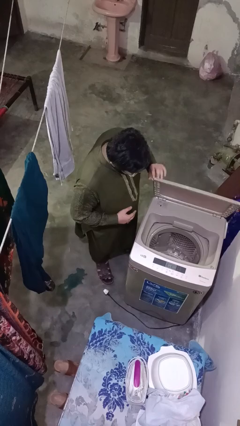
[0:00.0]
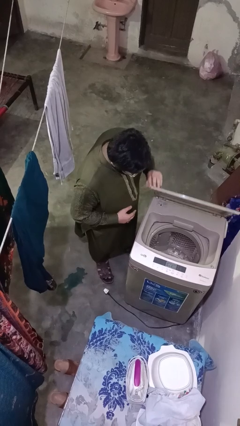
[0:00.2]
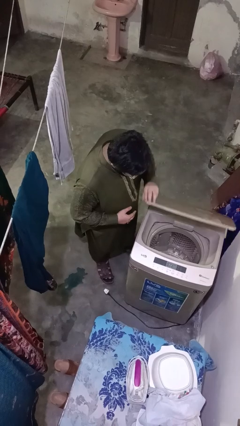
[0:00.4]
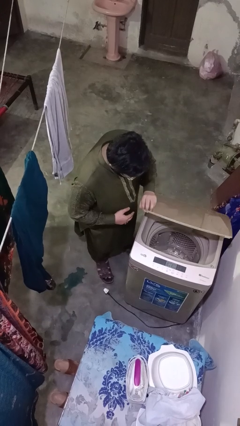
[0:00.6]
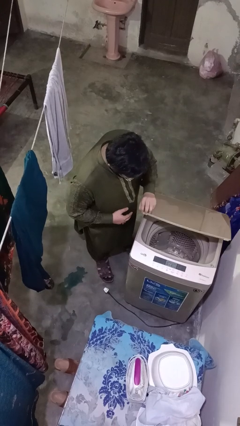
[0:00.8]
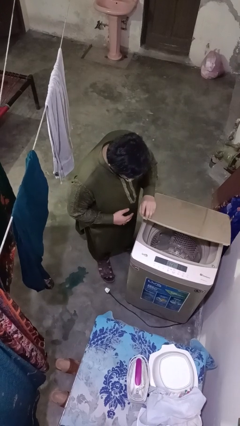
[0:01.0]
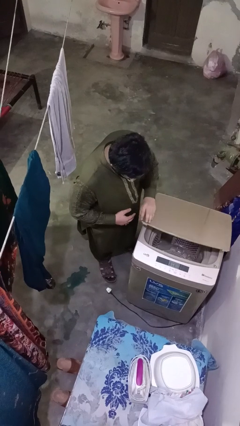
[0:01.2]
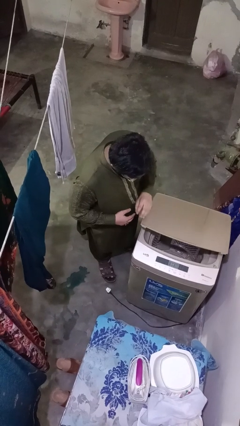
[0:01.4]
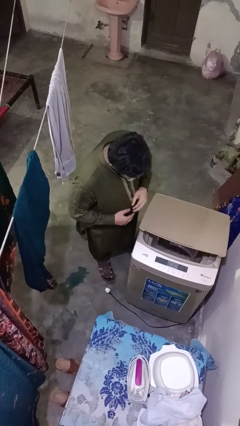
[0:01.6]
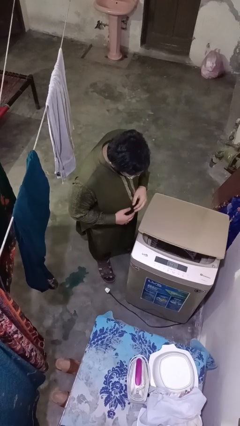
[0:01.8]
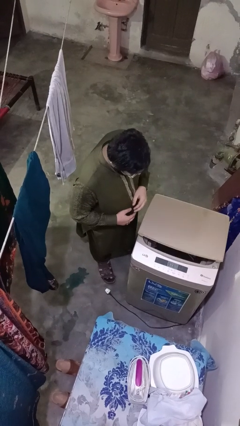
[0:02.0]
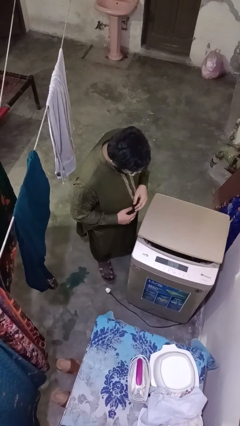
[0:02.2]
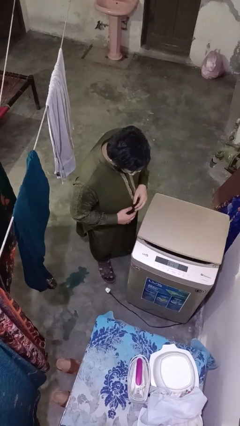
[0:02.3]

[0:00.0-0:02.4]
person closes clothes washer

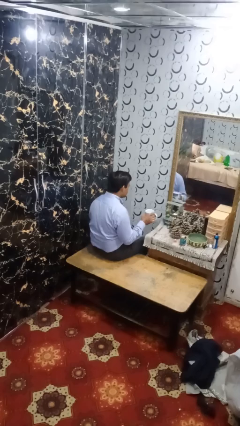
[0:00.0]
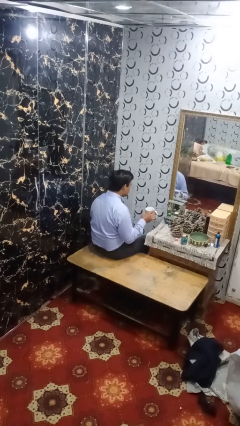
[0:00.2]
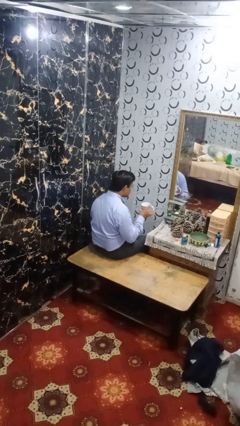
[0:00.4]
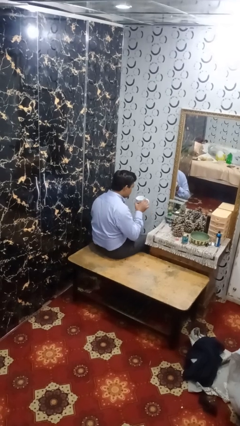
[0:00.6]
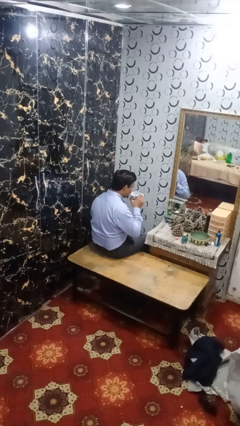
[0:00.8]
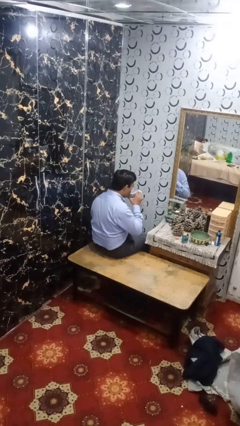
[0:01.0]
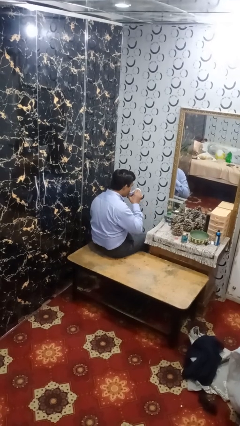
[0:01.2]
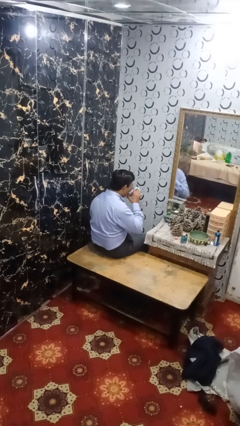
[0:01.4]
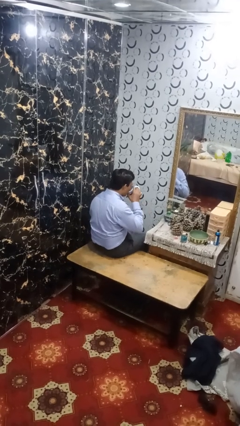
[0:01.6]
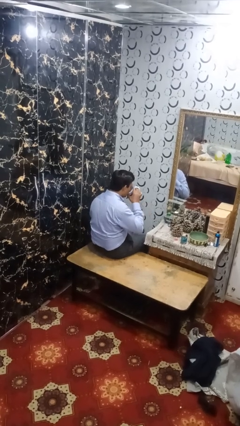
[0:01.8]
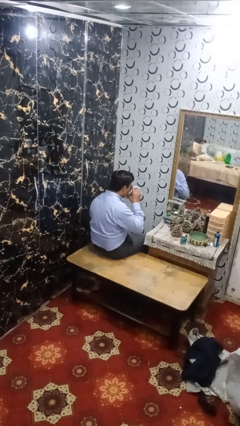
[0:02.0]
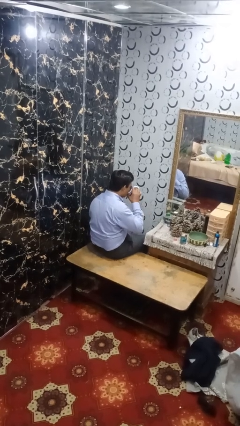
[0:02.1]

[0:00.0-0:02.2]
person drinks from mug

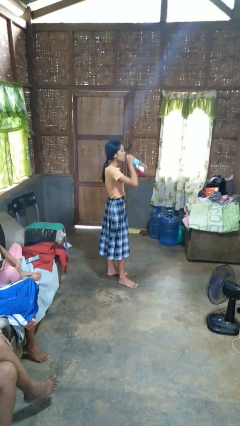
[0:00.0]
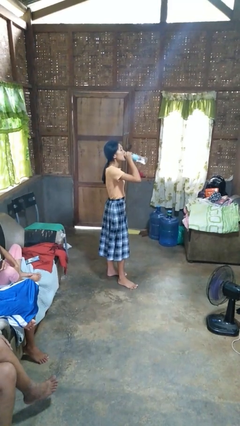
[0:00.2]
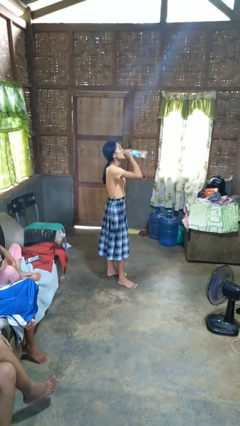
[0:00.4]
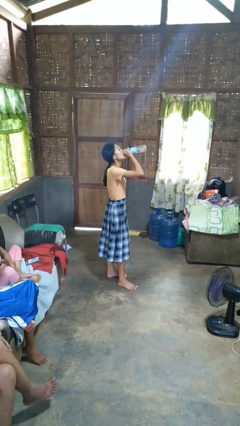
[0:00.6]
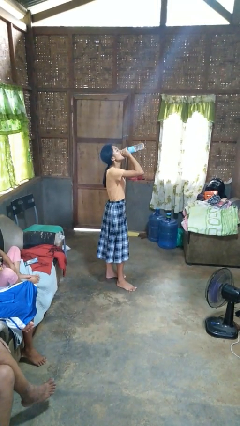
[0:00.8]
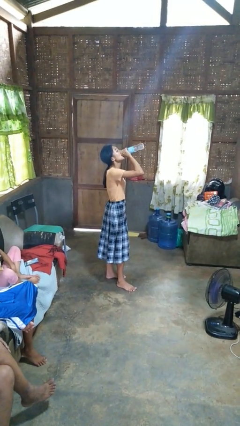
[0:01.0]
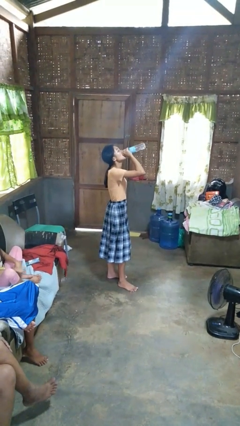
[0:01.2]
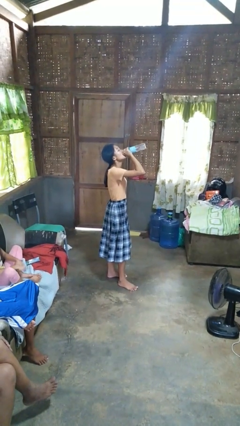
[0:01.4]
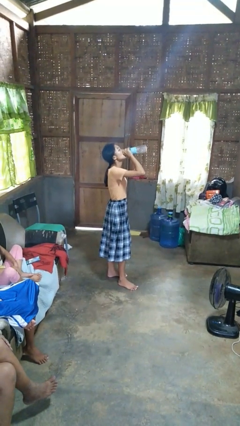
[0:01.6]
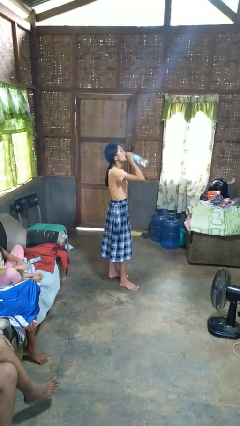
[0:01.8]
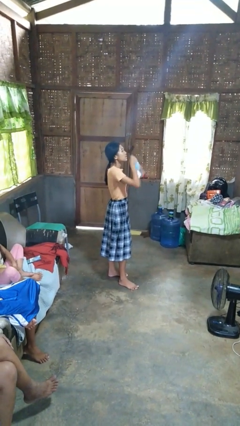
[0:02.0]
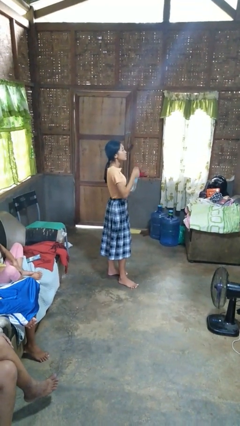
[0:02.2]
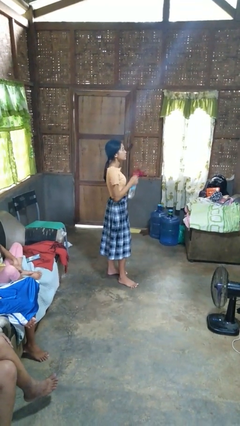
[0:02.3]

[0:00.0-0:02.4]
person drinks from bottle

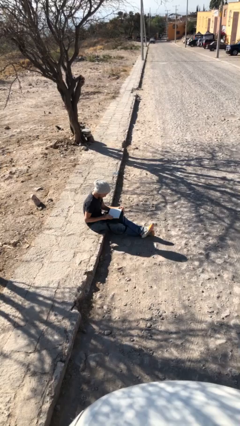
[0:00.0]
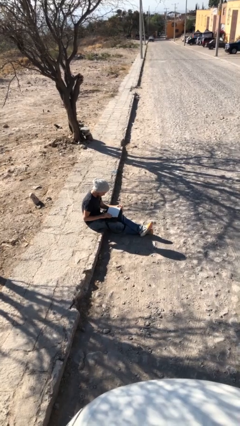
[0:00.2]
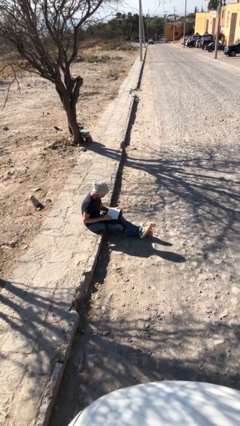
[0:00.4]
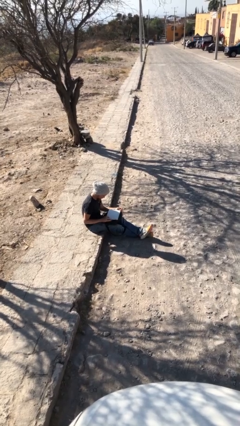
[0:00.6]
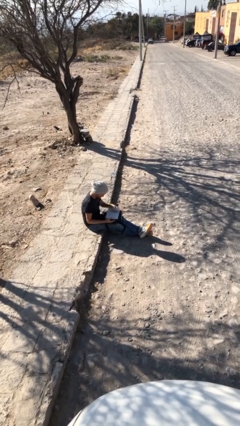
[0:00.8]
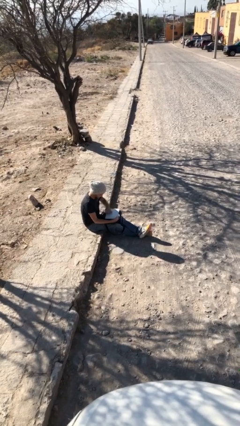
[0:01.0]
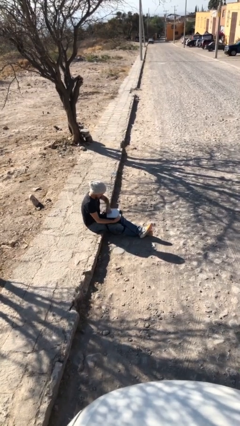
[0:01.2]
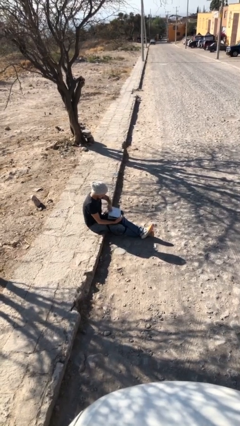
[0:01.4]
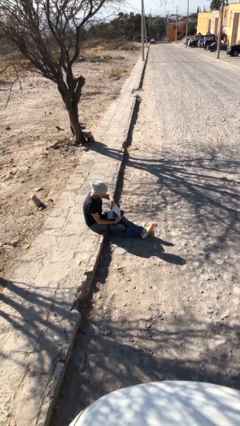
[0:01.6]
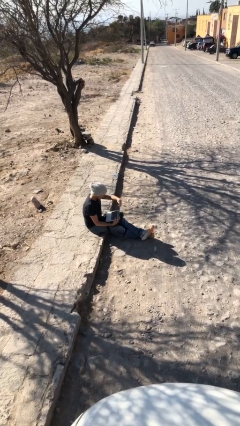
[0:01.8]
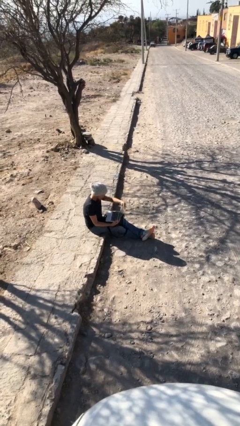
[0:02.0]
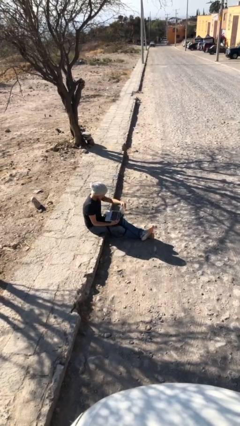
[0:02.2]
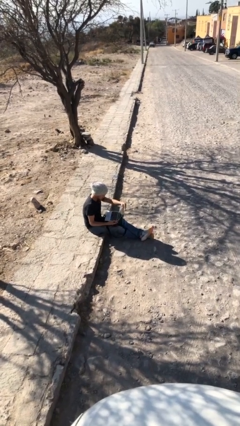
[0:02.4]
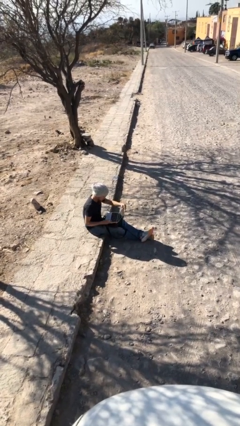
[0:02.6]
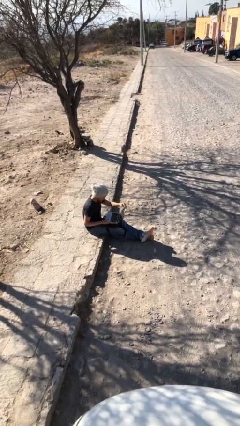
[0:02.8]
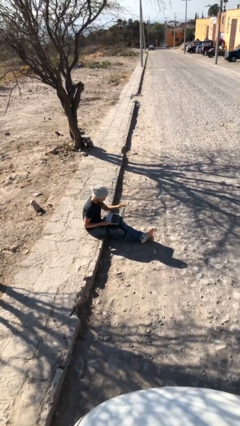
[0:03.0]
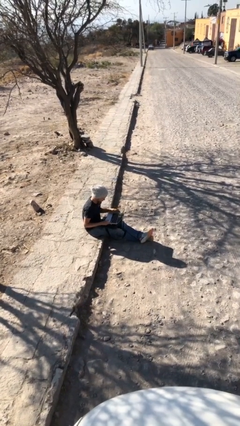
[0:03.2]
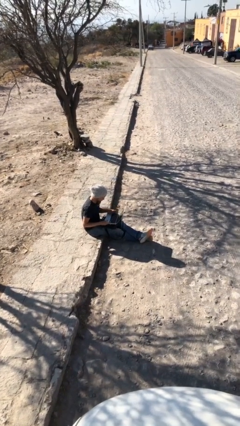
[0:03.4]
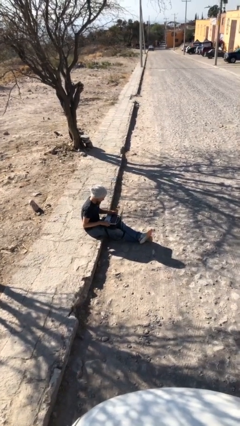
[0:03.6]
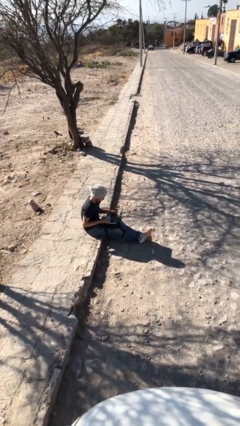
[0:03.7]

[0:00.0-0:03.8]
person interacts with laptop

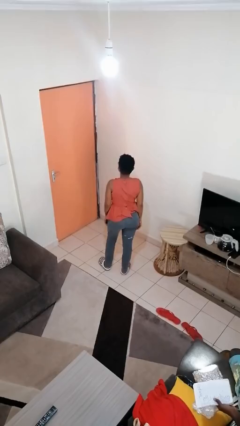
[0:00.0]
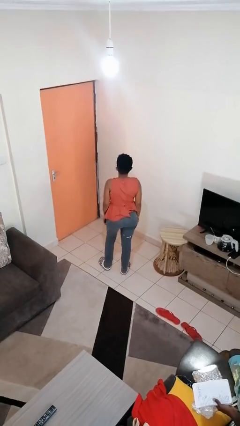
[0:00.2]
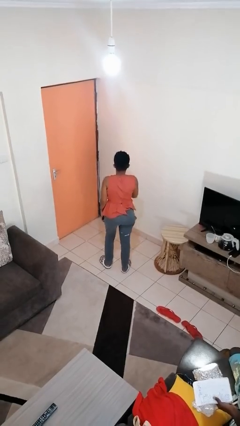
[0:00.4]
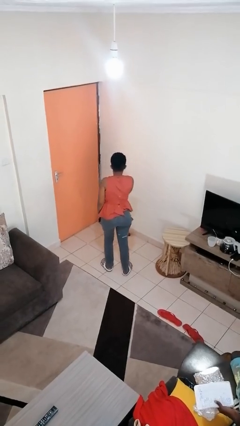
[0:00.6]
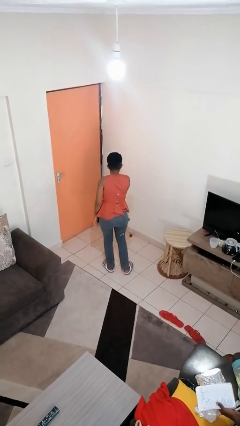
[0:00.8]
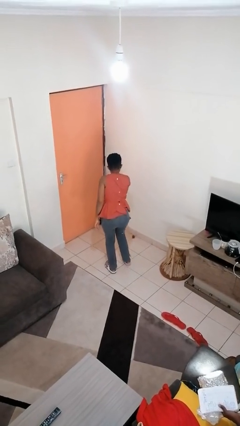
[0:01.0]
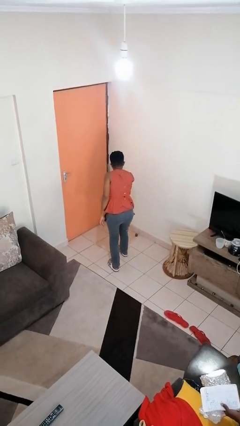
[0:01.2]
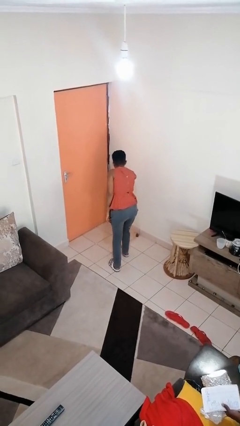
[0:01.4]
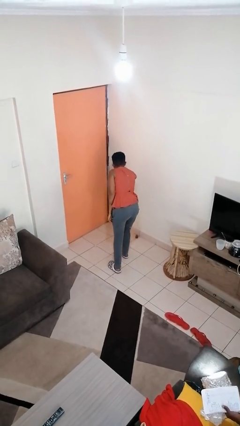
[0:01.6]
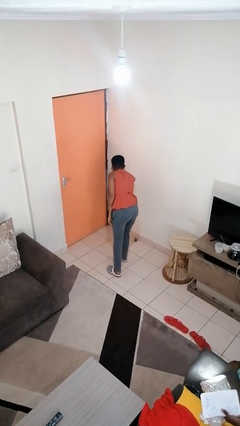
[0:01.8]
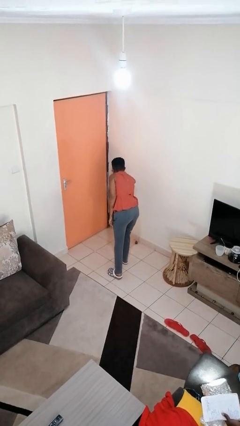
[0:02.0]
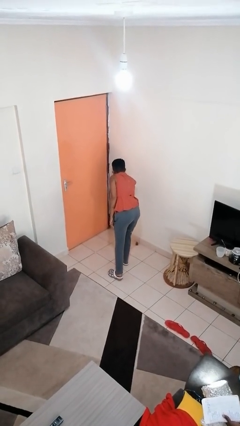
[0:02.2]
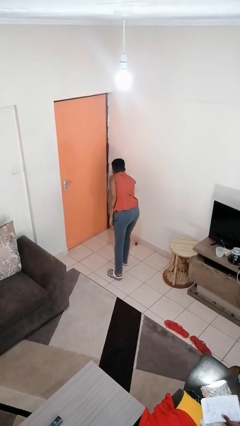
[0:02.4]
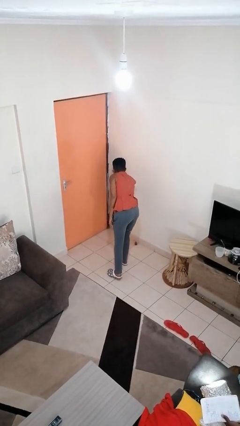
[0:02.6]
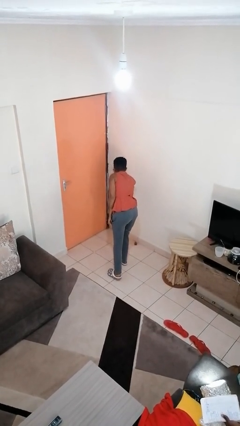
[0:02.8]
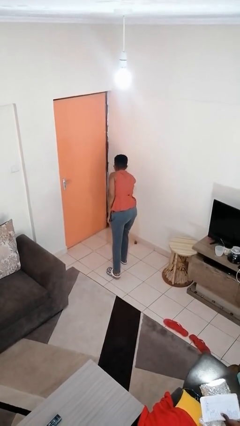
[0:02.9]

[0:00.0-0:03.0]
person gestures watch closely

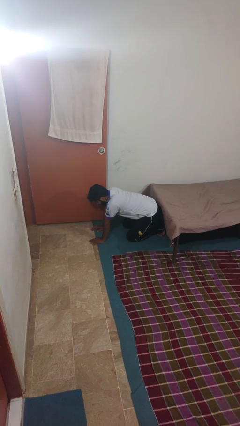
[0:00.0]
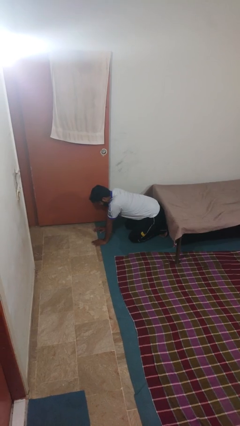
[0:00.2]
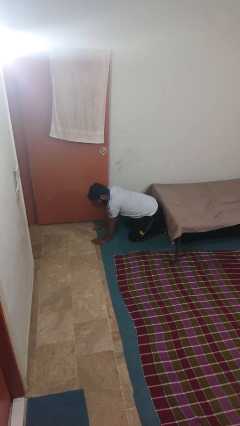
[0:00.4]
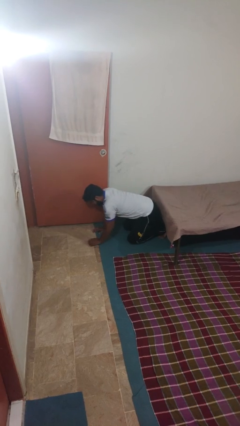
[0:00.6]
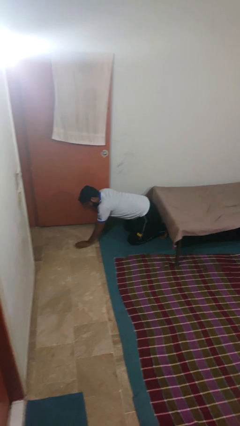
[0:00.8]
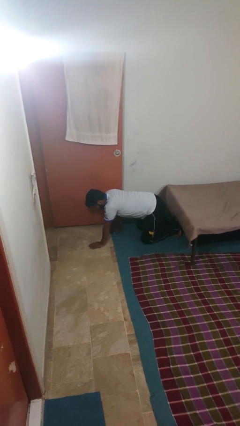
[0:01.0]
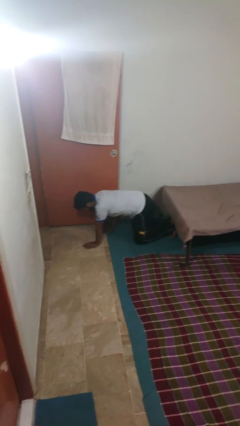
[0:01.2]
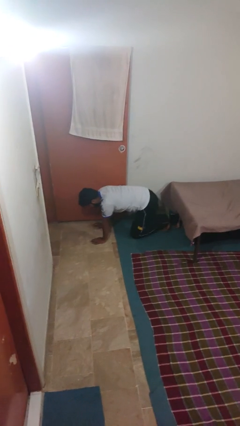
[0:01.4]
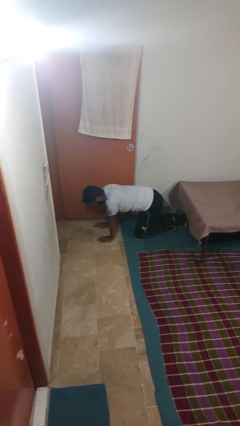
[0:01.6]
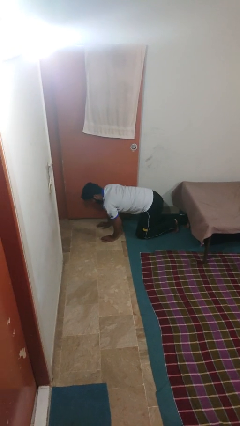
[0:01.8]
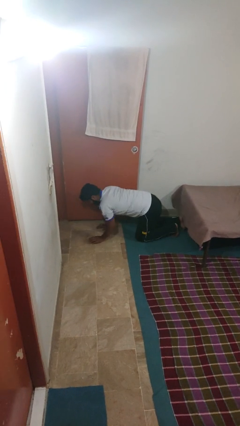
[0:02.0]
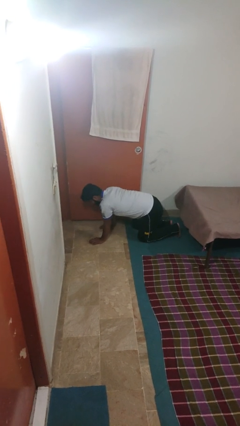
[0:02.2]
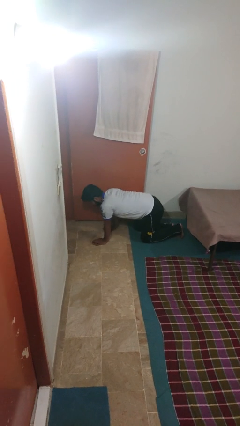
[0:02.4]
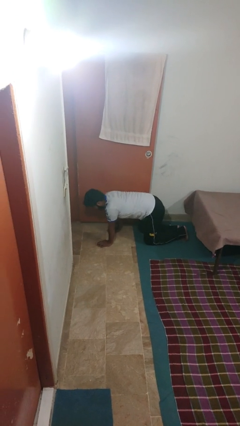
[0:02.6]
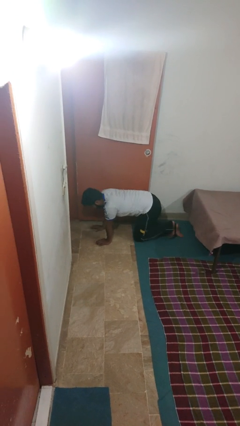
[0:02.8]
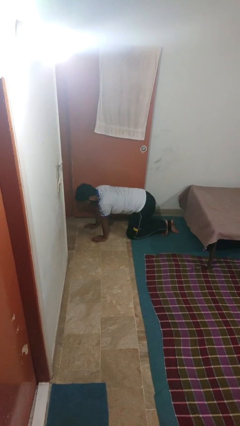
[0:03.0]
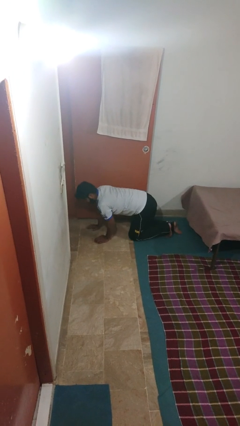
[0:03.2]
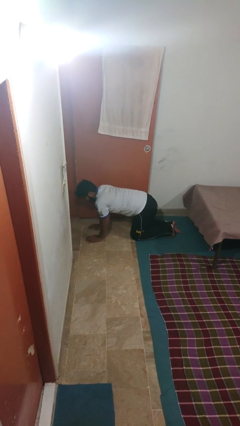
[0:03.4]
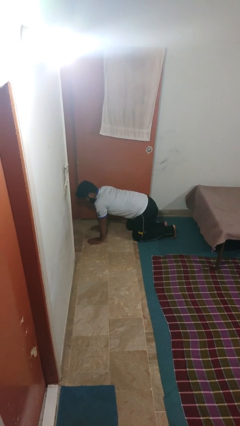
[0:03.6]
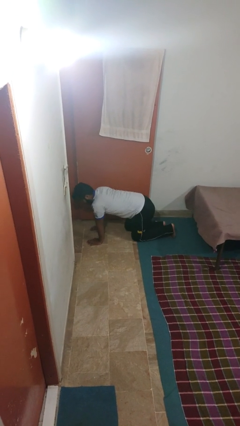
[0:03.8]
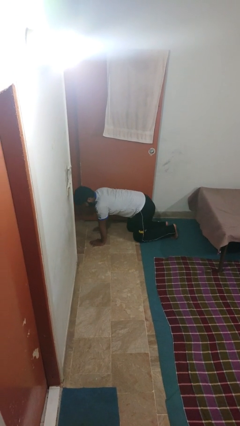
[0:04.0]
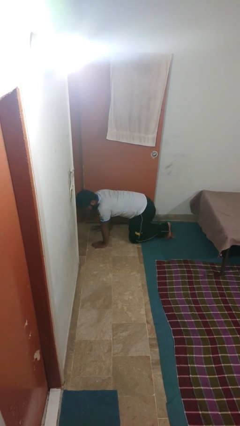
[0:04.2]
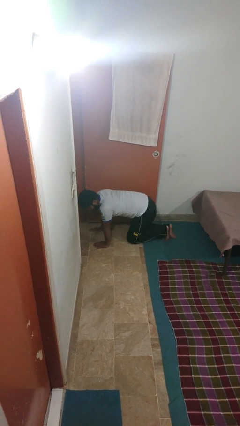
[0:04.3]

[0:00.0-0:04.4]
person crawls
